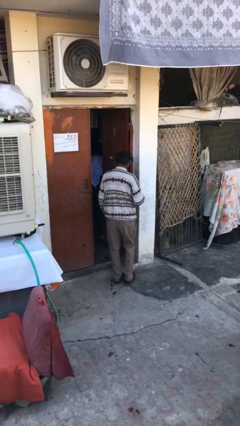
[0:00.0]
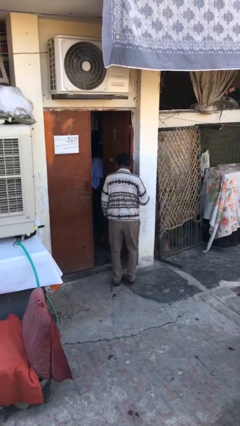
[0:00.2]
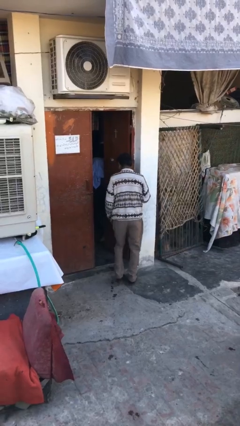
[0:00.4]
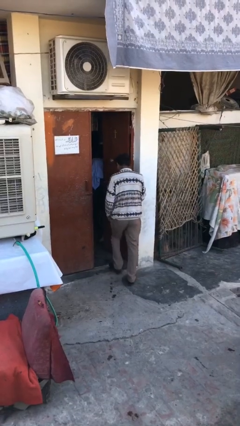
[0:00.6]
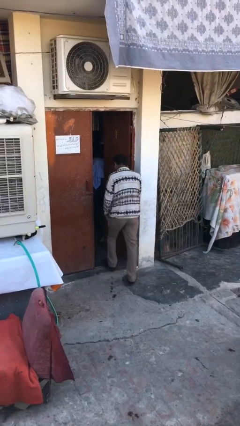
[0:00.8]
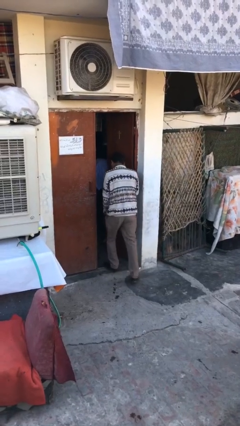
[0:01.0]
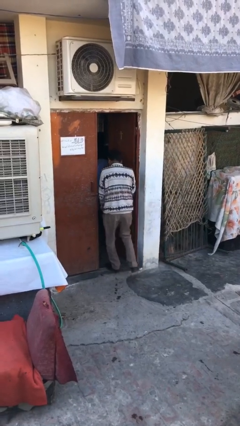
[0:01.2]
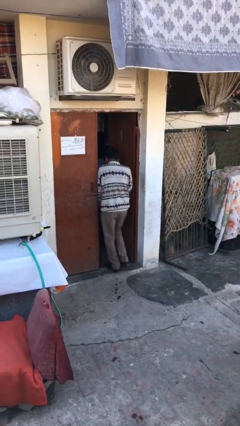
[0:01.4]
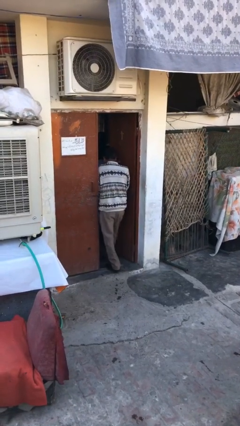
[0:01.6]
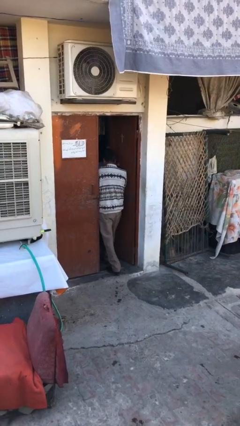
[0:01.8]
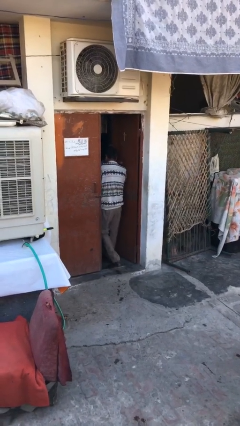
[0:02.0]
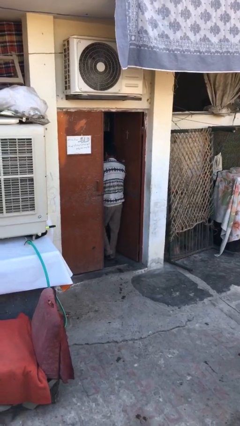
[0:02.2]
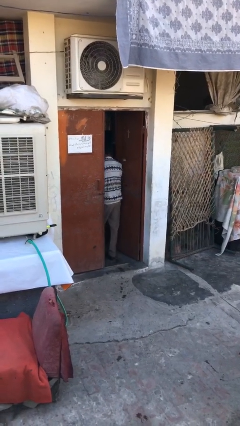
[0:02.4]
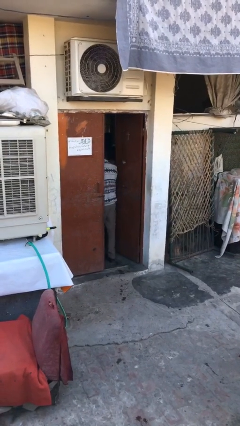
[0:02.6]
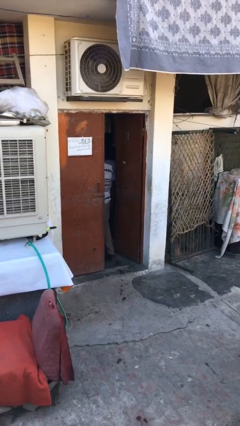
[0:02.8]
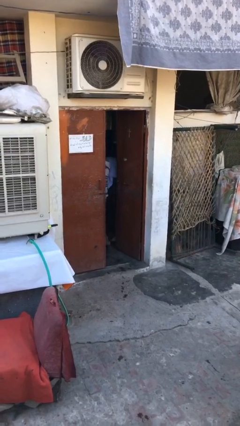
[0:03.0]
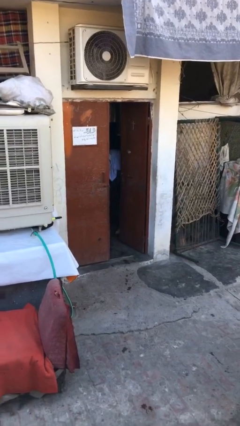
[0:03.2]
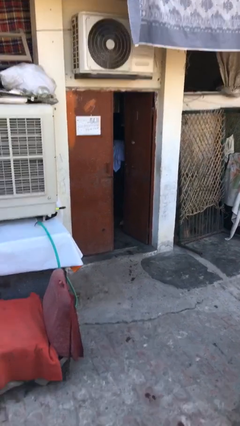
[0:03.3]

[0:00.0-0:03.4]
person exits scene through structure

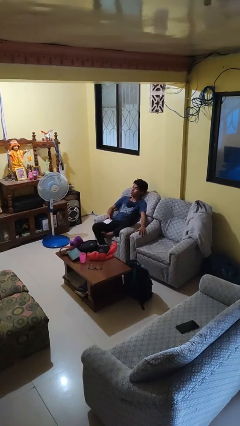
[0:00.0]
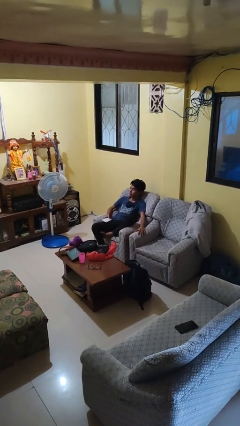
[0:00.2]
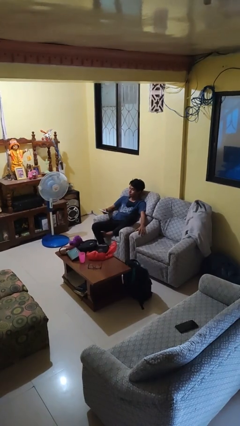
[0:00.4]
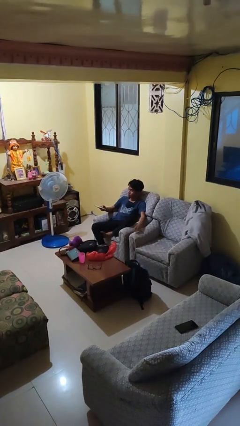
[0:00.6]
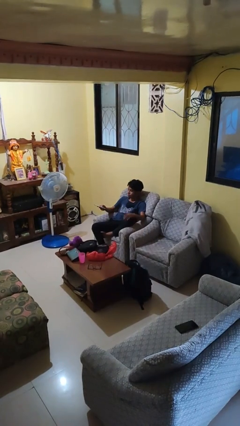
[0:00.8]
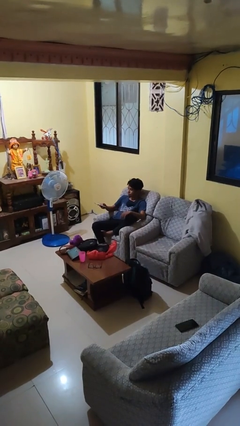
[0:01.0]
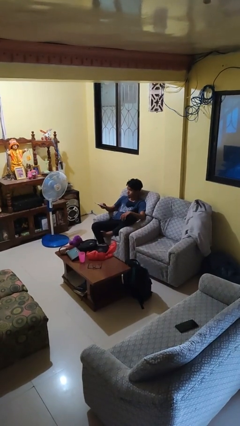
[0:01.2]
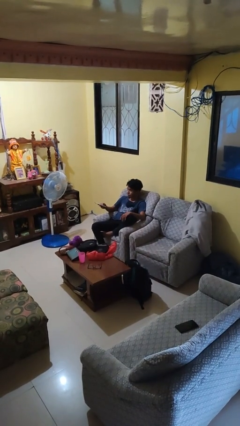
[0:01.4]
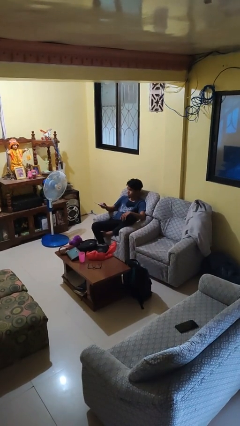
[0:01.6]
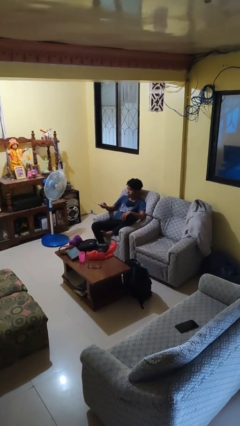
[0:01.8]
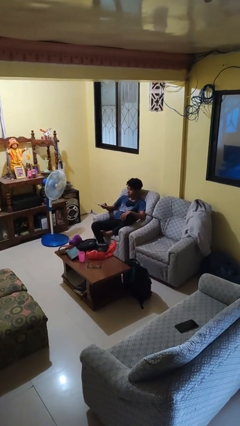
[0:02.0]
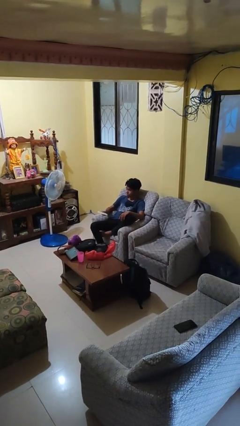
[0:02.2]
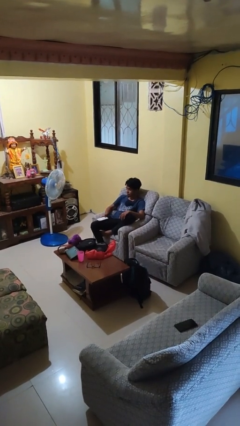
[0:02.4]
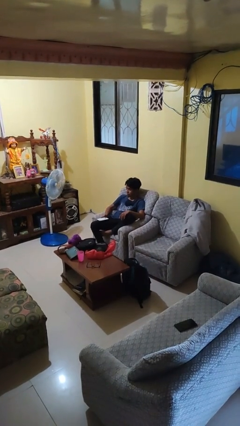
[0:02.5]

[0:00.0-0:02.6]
person uses television remote

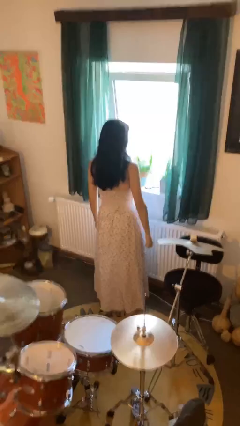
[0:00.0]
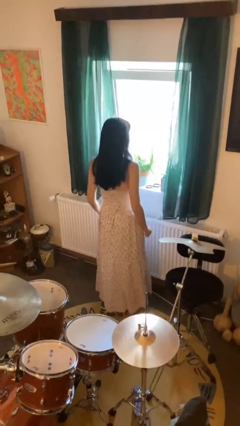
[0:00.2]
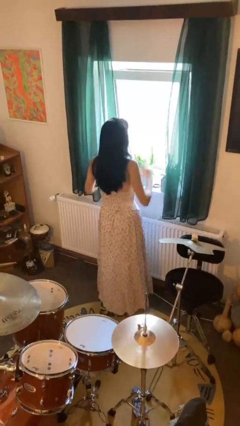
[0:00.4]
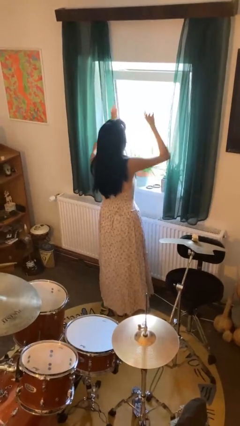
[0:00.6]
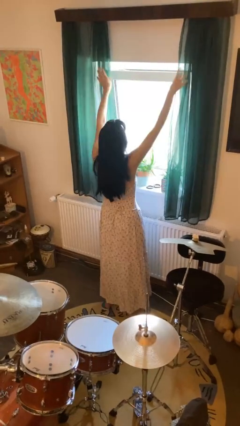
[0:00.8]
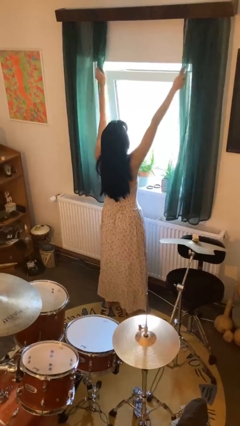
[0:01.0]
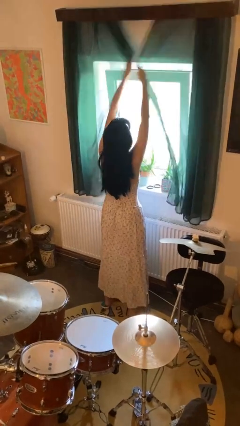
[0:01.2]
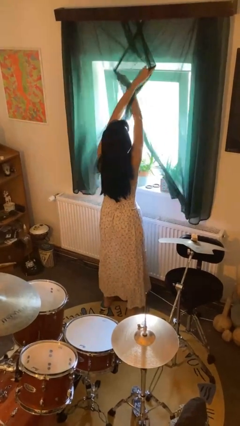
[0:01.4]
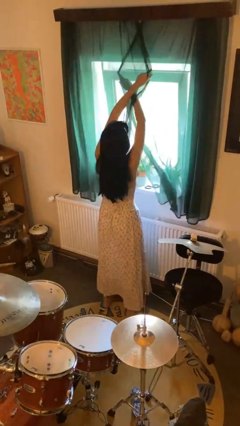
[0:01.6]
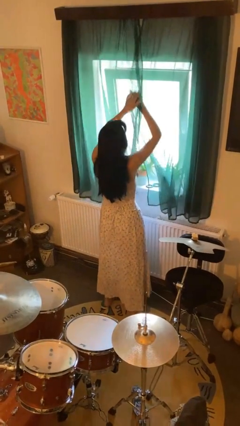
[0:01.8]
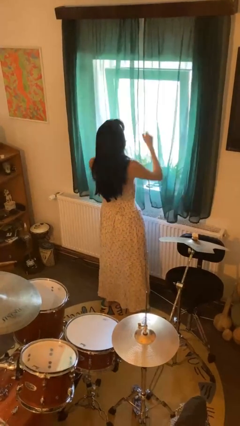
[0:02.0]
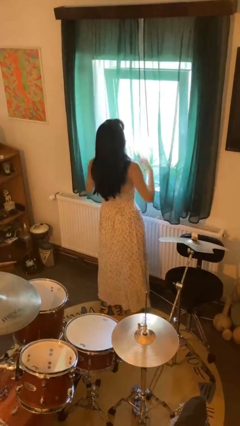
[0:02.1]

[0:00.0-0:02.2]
person closes curtains

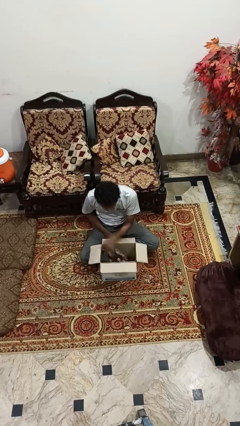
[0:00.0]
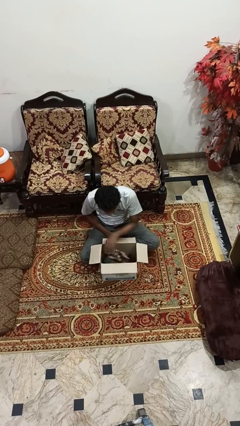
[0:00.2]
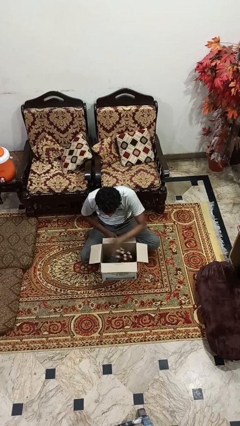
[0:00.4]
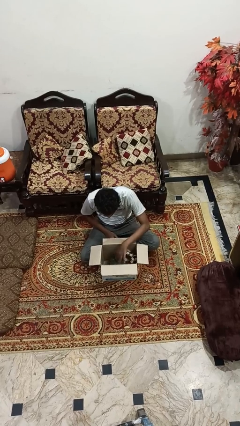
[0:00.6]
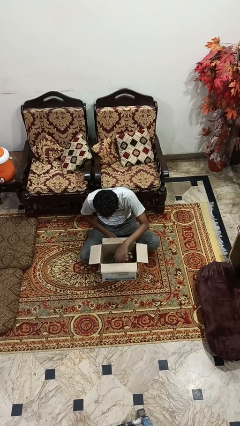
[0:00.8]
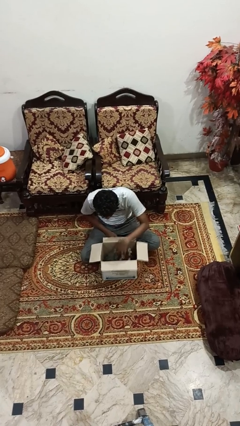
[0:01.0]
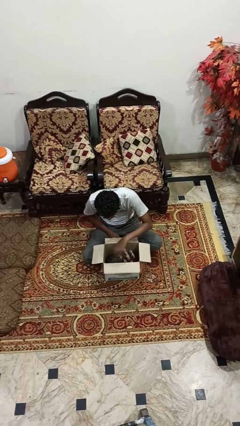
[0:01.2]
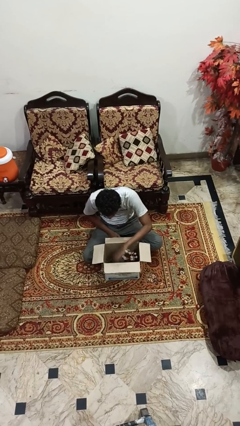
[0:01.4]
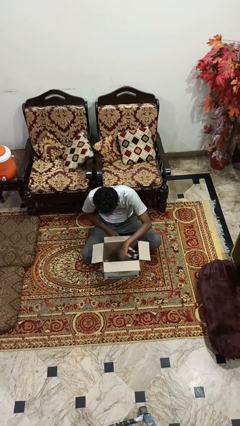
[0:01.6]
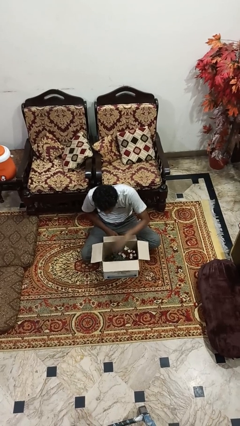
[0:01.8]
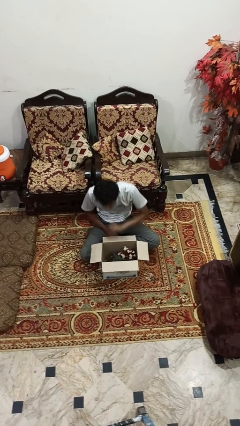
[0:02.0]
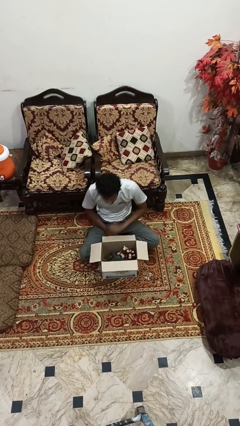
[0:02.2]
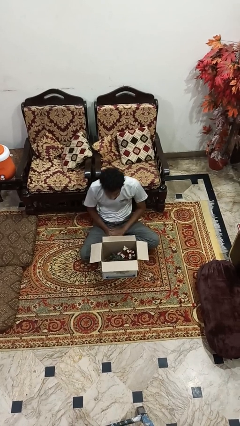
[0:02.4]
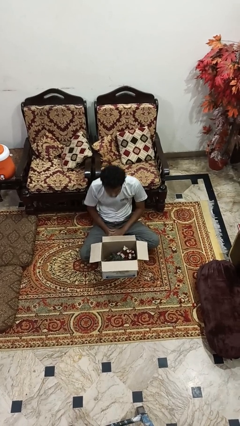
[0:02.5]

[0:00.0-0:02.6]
person searches in box

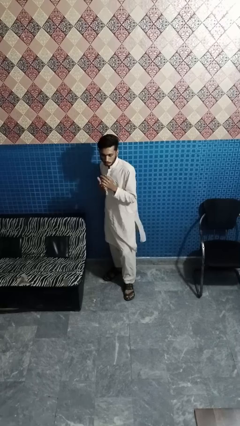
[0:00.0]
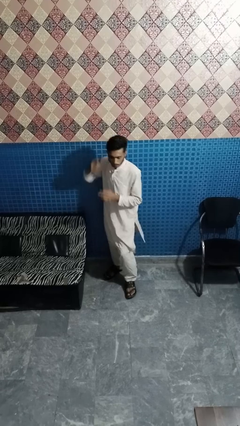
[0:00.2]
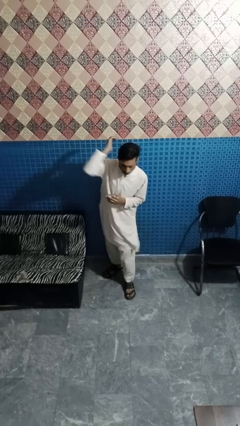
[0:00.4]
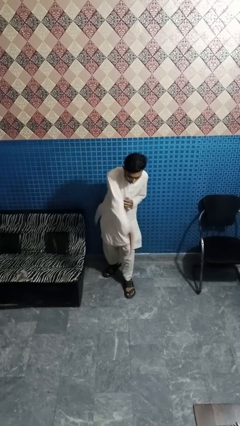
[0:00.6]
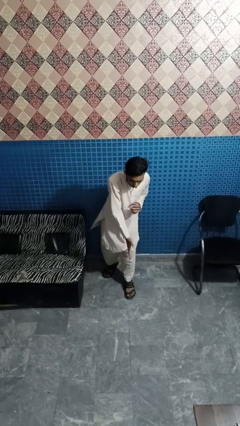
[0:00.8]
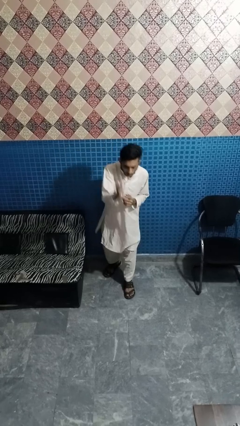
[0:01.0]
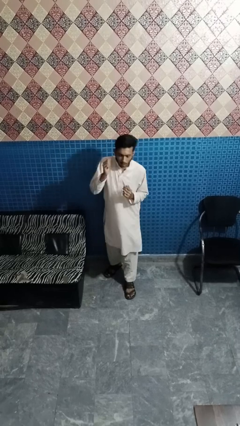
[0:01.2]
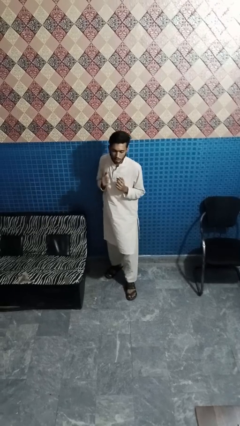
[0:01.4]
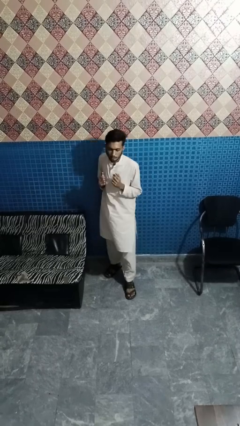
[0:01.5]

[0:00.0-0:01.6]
person karate chop

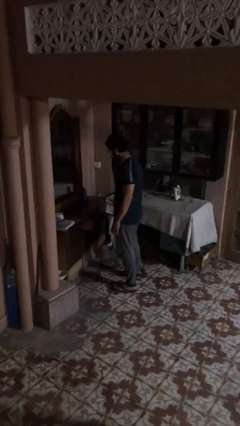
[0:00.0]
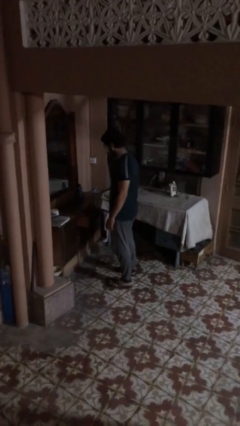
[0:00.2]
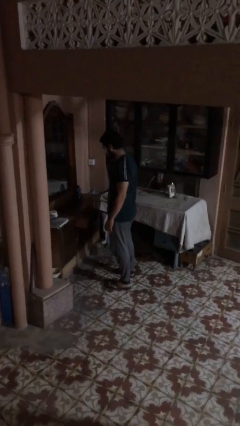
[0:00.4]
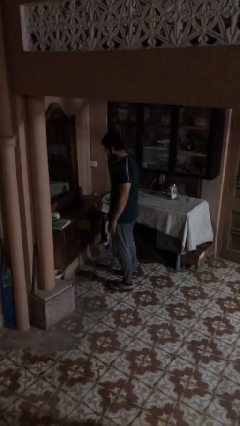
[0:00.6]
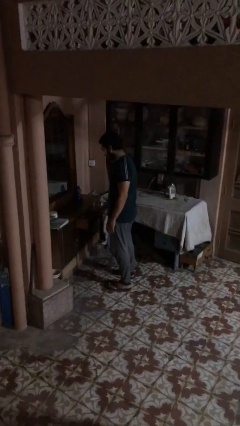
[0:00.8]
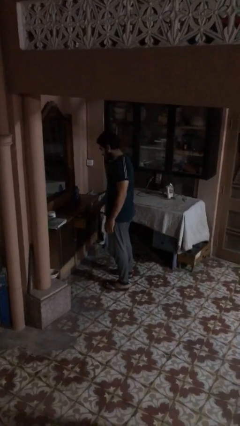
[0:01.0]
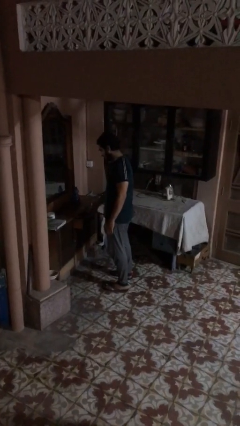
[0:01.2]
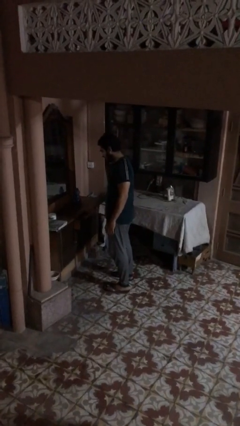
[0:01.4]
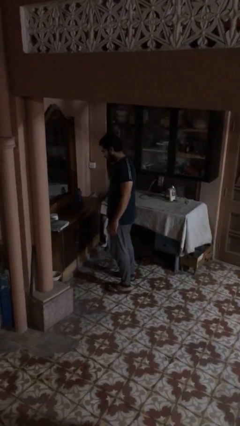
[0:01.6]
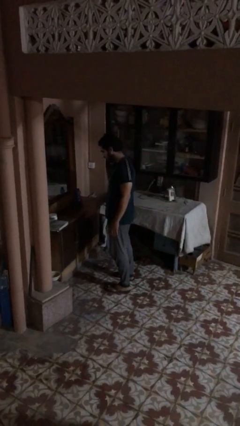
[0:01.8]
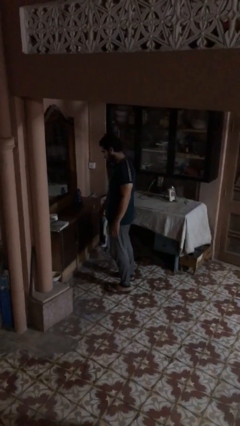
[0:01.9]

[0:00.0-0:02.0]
person closes dresser drawer

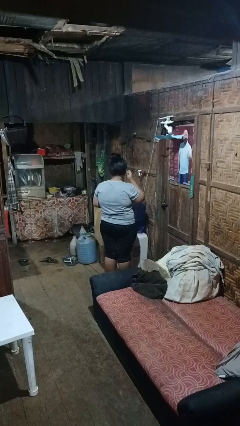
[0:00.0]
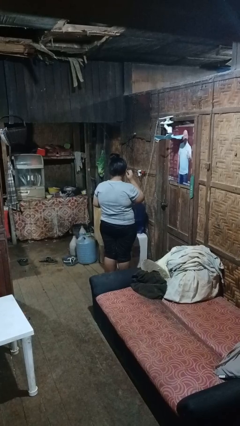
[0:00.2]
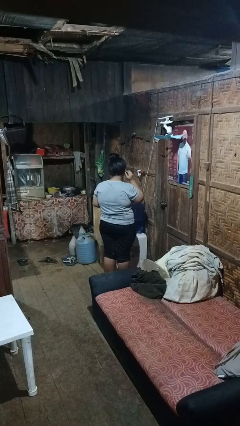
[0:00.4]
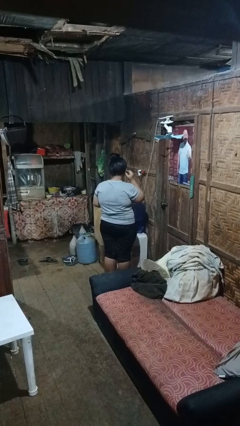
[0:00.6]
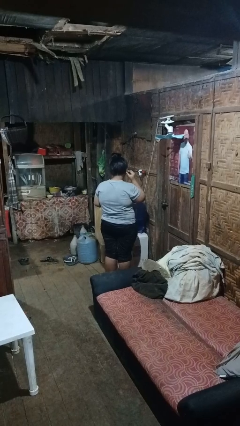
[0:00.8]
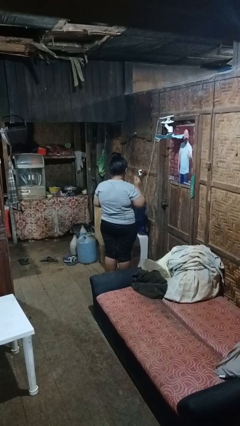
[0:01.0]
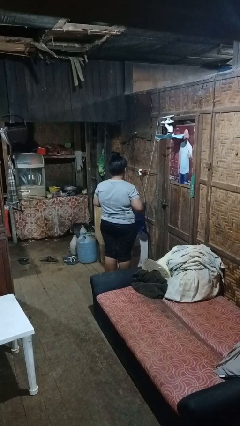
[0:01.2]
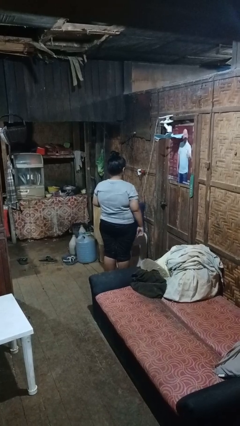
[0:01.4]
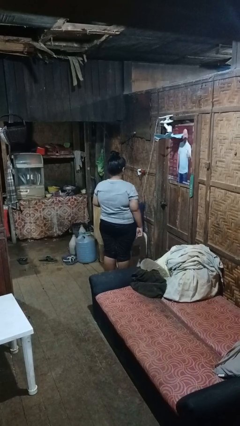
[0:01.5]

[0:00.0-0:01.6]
person puts on headphones

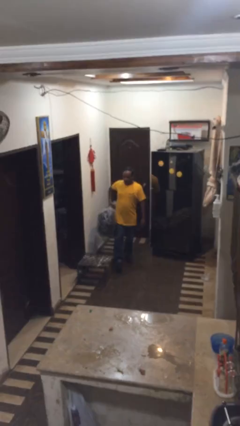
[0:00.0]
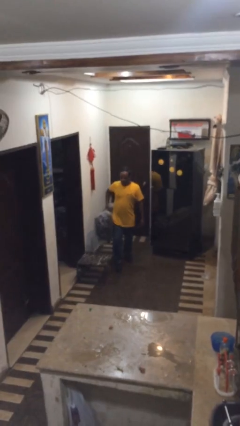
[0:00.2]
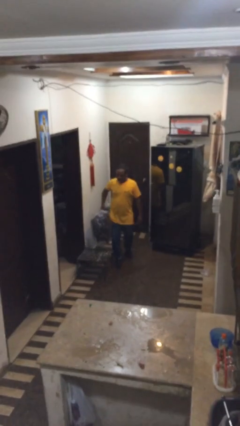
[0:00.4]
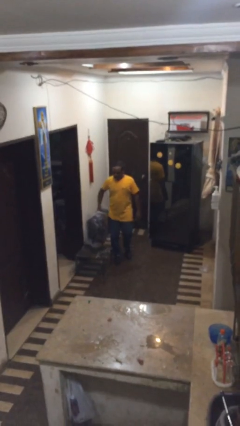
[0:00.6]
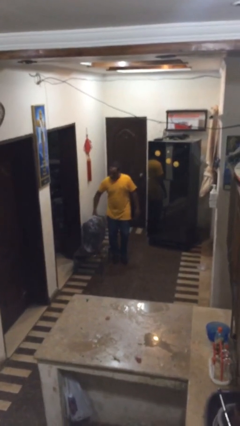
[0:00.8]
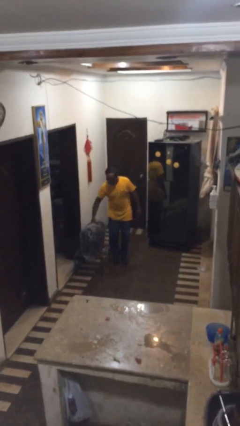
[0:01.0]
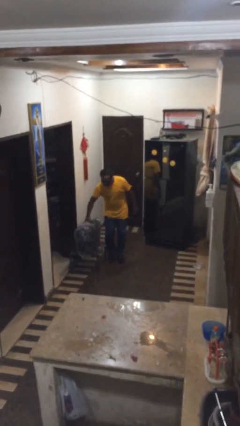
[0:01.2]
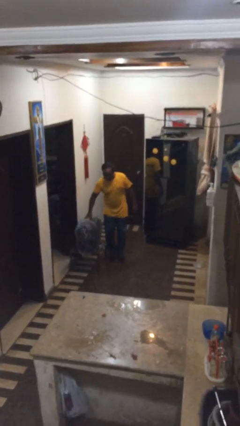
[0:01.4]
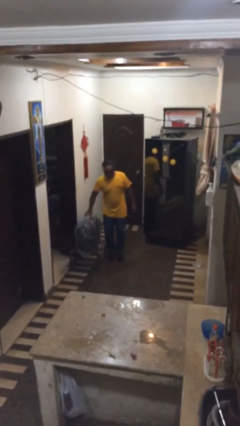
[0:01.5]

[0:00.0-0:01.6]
person puts down object on table
